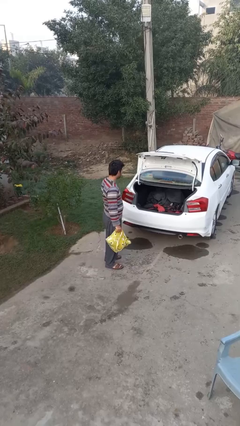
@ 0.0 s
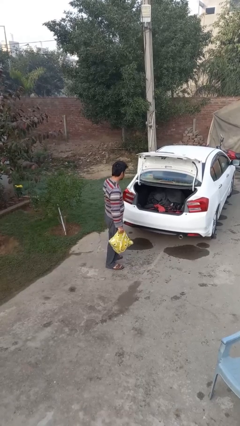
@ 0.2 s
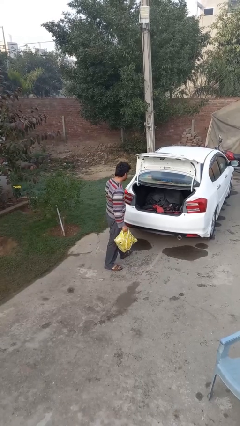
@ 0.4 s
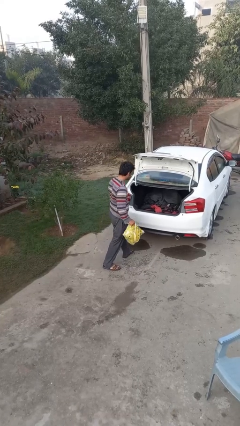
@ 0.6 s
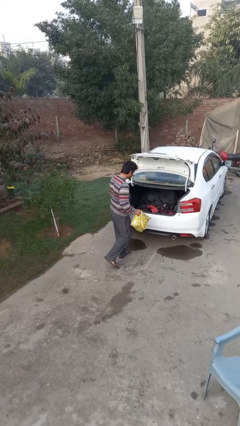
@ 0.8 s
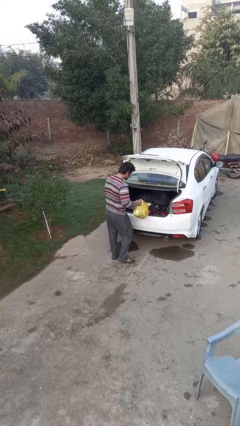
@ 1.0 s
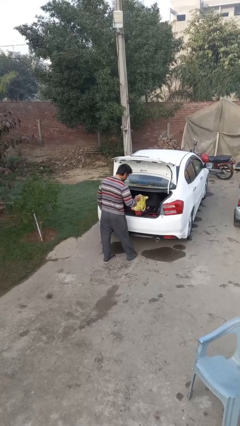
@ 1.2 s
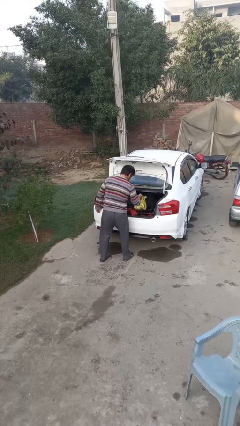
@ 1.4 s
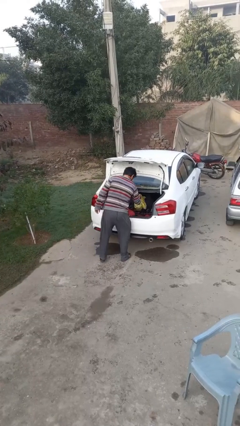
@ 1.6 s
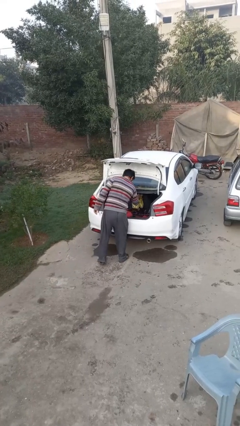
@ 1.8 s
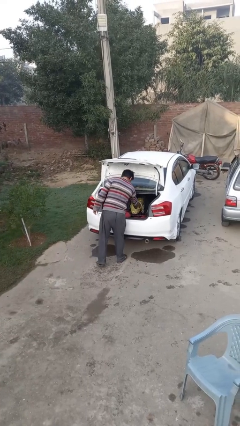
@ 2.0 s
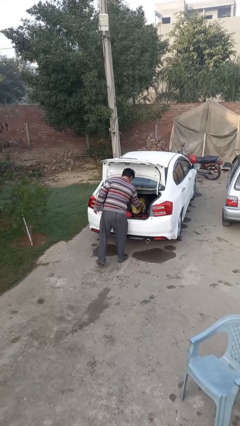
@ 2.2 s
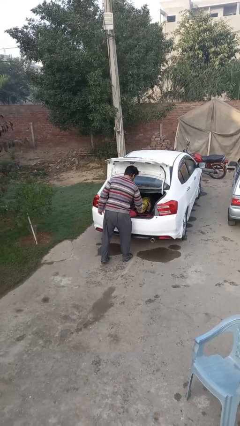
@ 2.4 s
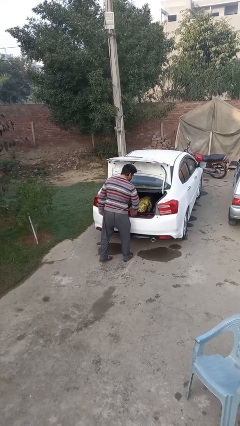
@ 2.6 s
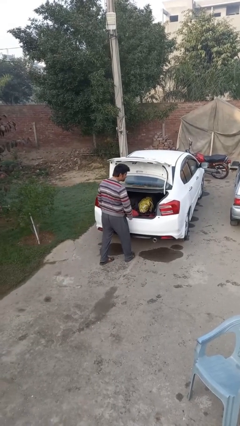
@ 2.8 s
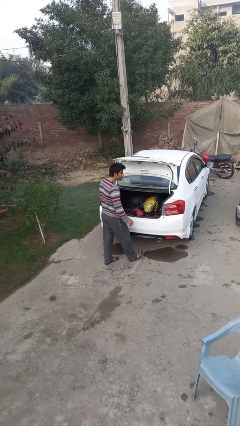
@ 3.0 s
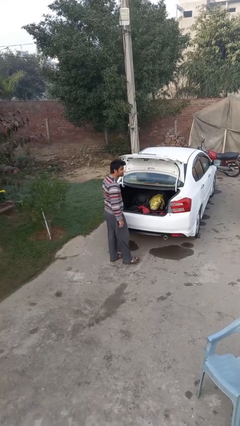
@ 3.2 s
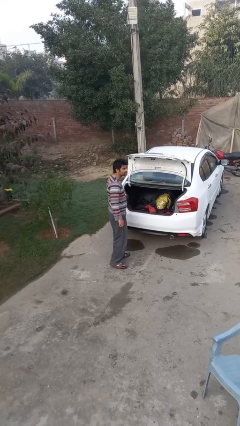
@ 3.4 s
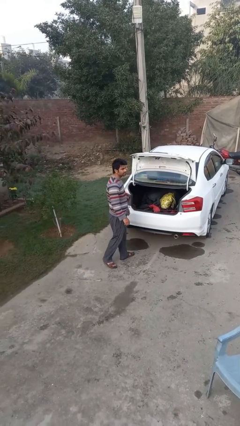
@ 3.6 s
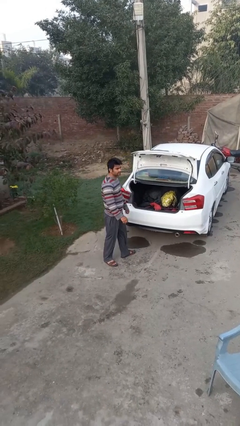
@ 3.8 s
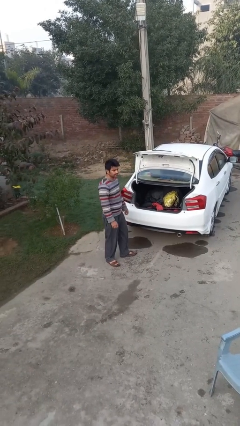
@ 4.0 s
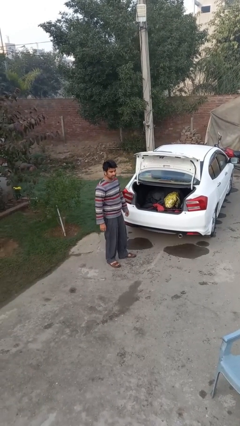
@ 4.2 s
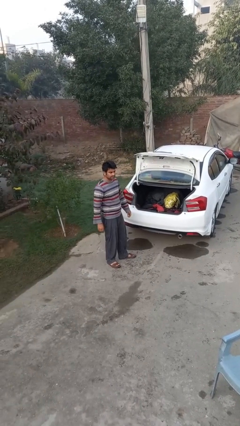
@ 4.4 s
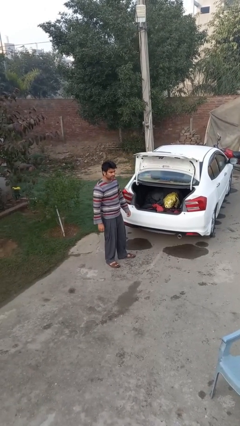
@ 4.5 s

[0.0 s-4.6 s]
person loads car

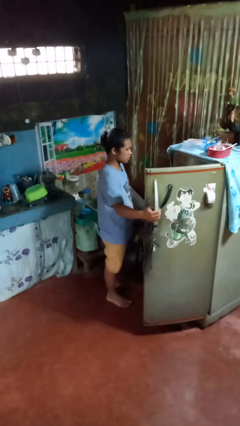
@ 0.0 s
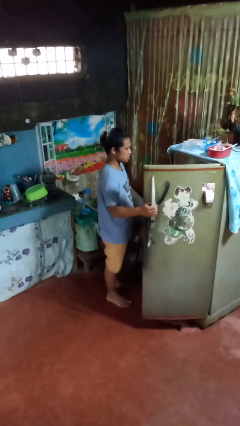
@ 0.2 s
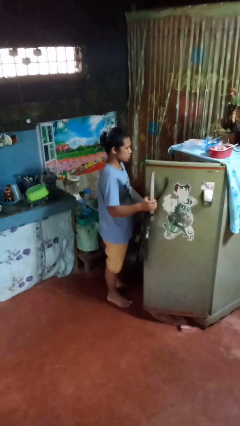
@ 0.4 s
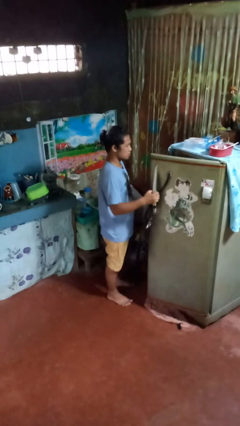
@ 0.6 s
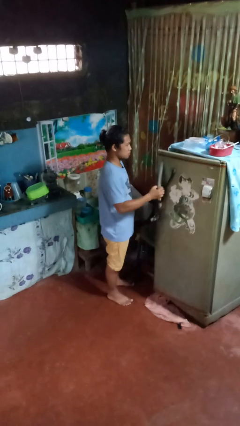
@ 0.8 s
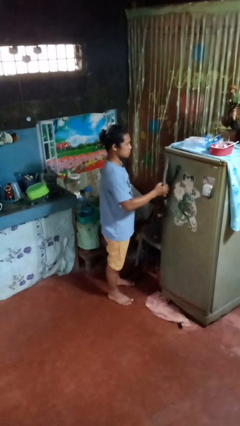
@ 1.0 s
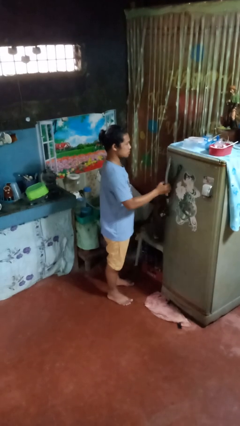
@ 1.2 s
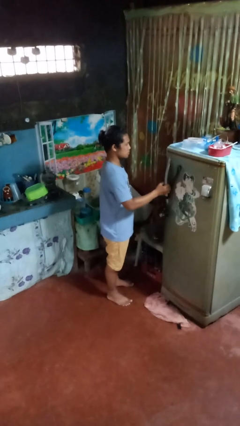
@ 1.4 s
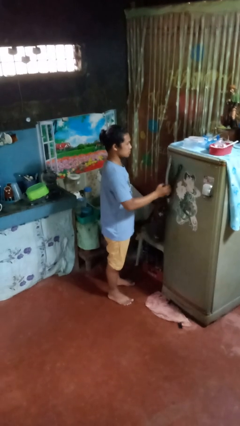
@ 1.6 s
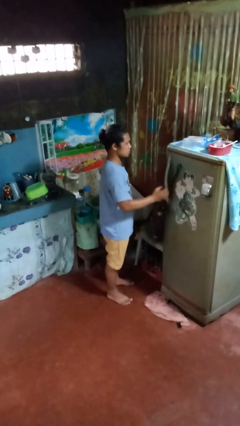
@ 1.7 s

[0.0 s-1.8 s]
person closes refrigerator

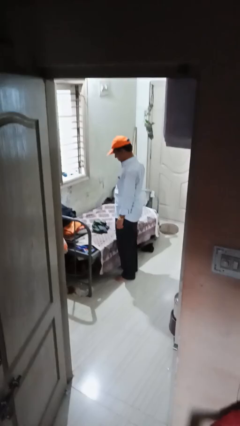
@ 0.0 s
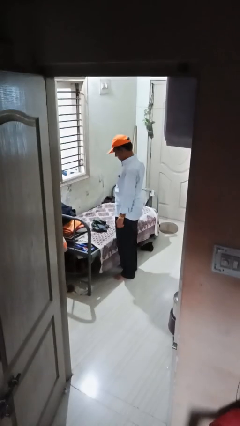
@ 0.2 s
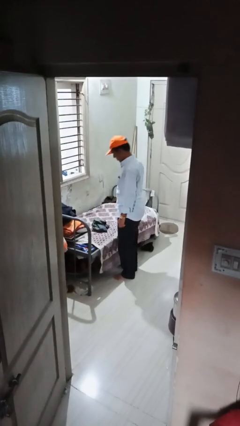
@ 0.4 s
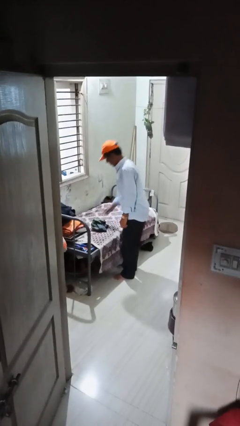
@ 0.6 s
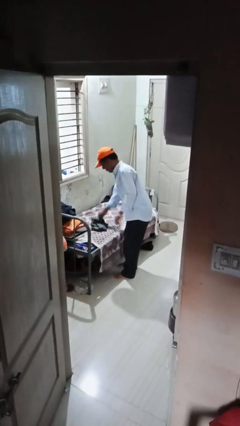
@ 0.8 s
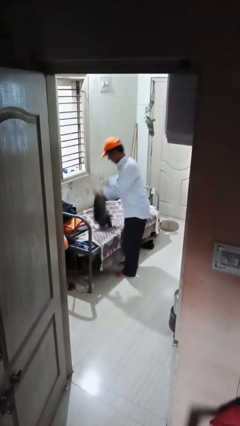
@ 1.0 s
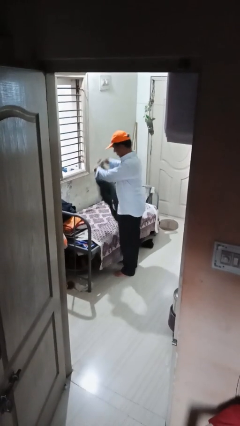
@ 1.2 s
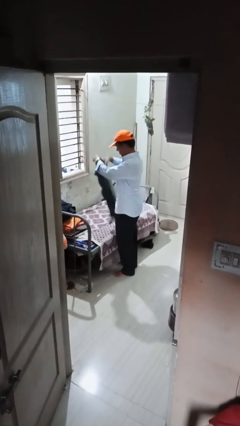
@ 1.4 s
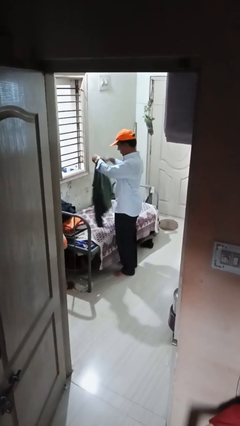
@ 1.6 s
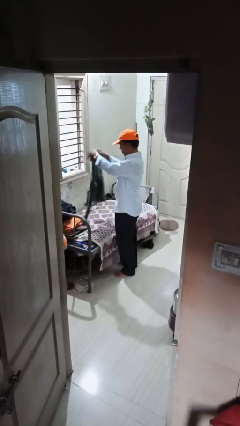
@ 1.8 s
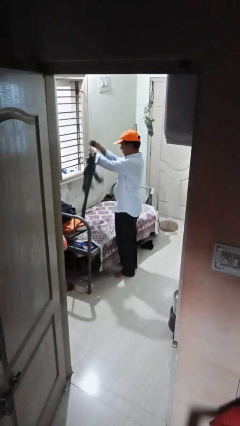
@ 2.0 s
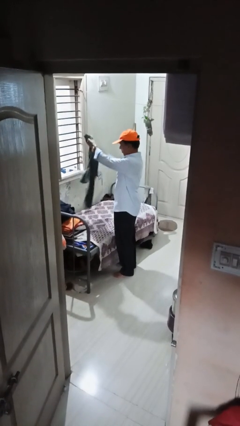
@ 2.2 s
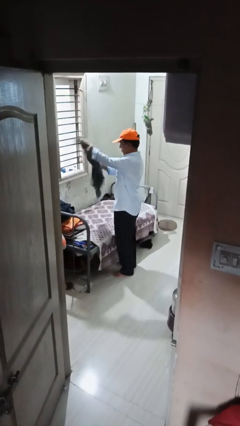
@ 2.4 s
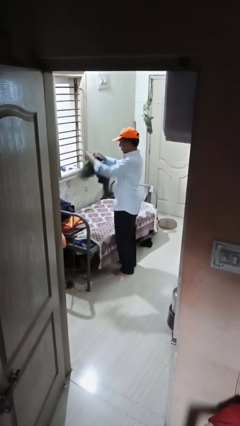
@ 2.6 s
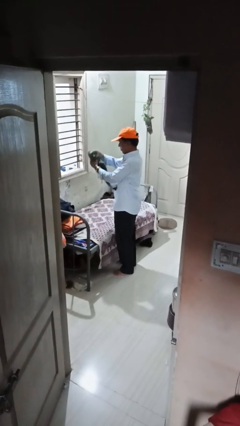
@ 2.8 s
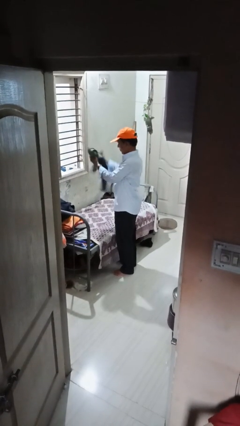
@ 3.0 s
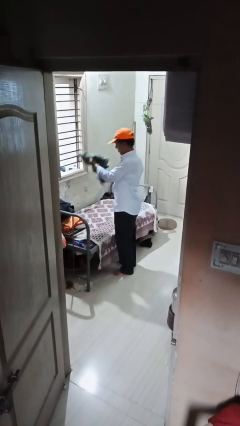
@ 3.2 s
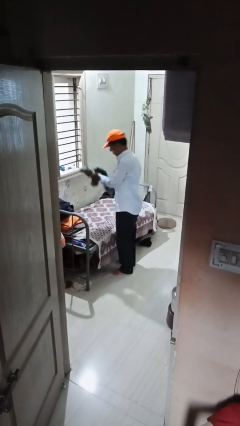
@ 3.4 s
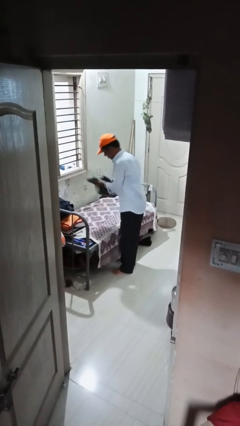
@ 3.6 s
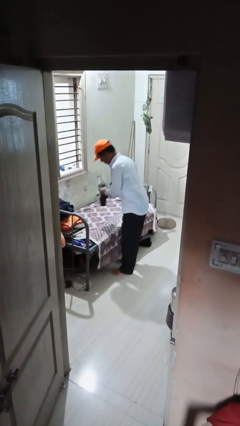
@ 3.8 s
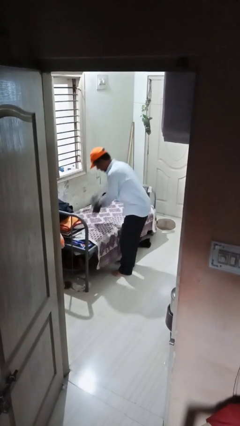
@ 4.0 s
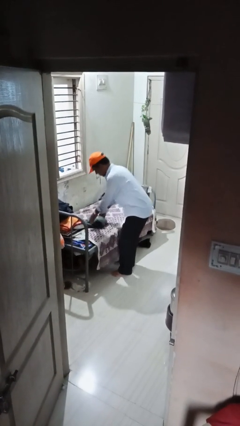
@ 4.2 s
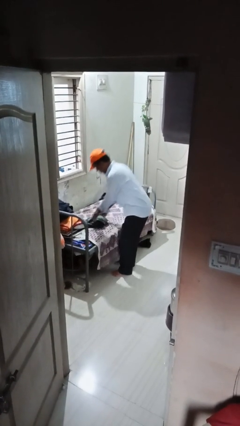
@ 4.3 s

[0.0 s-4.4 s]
person folds shirt

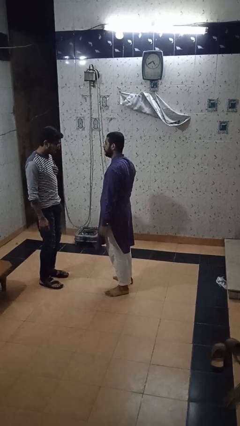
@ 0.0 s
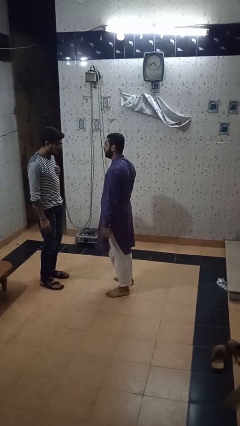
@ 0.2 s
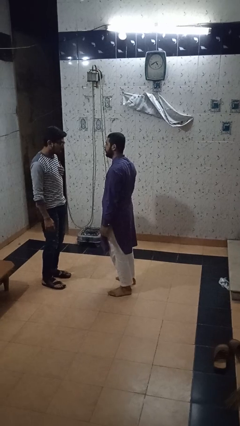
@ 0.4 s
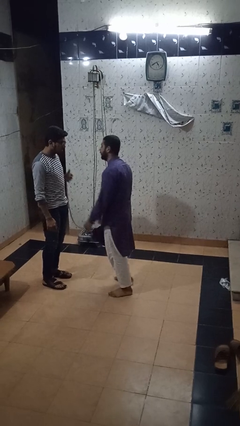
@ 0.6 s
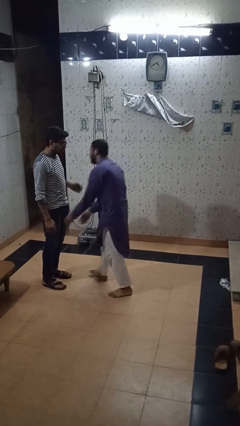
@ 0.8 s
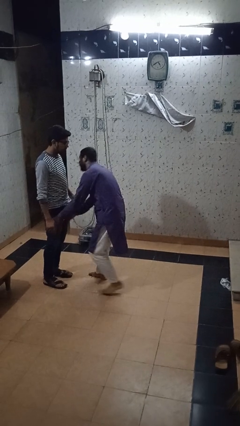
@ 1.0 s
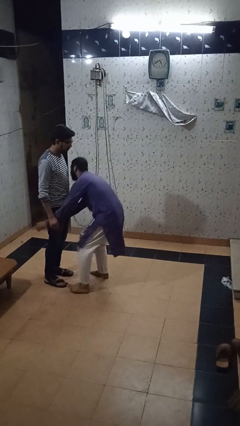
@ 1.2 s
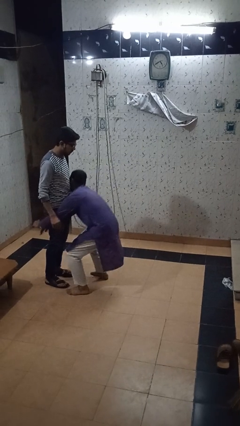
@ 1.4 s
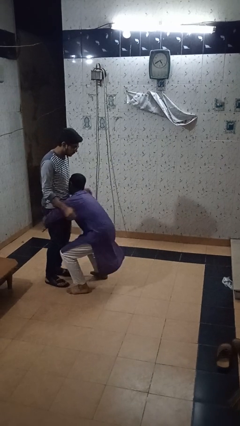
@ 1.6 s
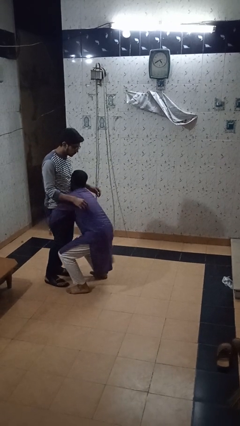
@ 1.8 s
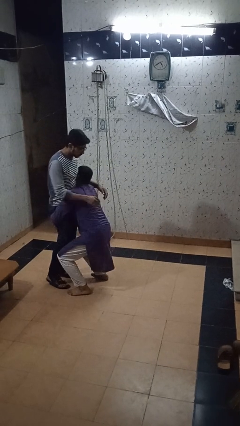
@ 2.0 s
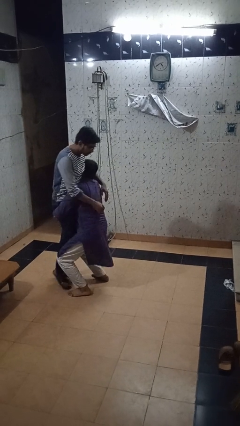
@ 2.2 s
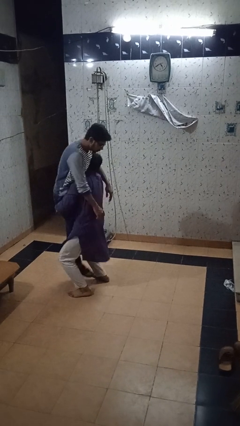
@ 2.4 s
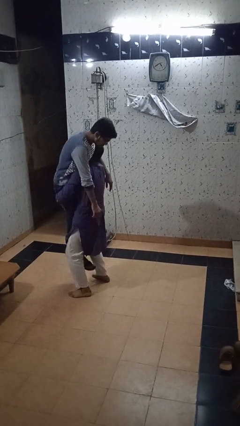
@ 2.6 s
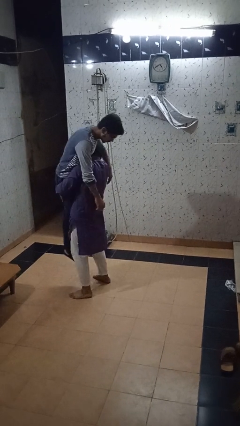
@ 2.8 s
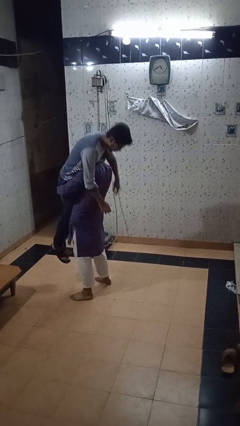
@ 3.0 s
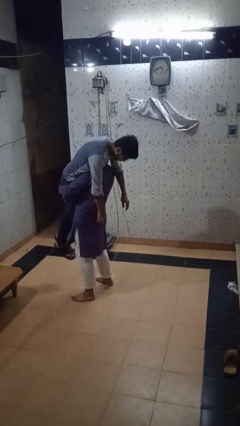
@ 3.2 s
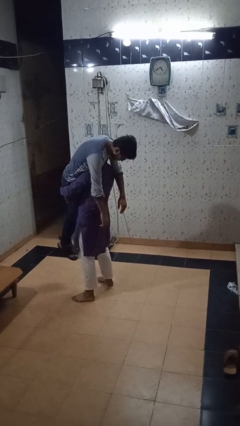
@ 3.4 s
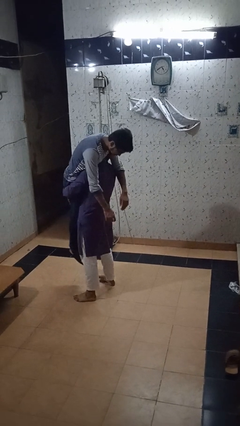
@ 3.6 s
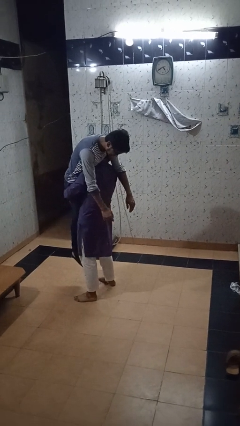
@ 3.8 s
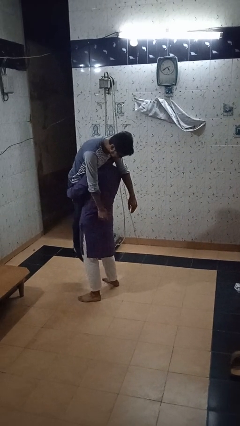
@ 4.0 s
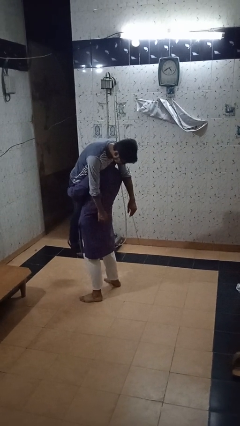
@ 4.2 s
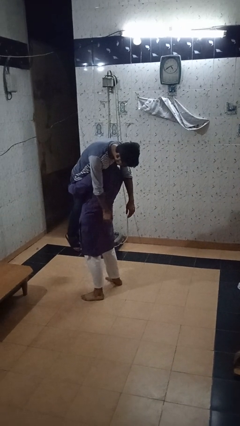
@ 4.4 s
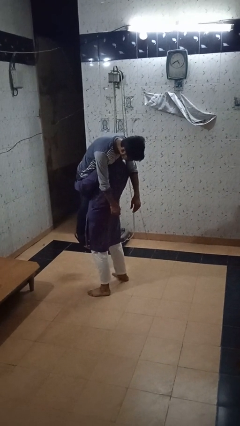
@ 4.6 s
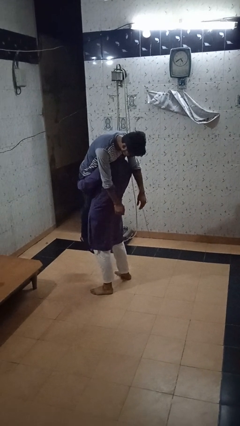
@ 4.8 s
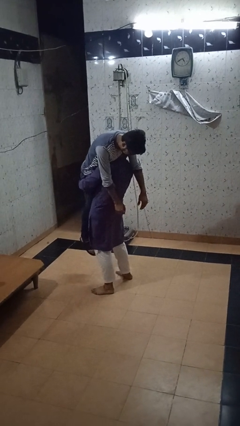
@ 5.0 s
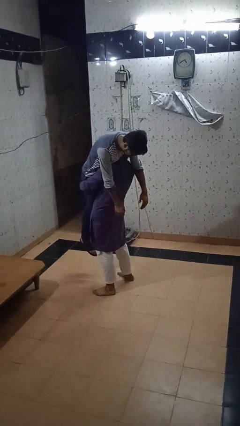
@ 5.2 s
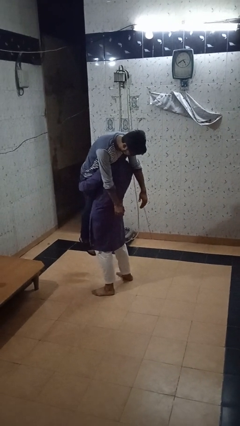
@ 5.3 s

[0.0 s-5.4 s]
person carries person over shoulder

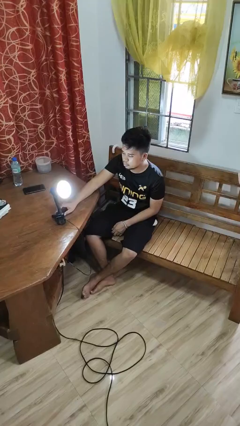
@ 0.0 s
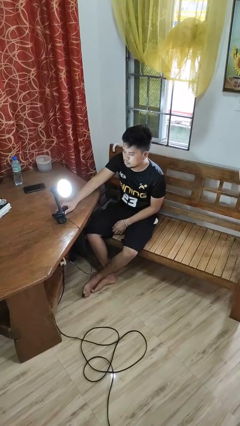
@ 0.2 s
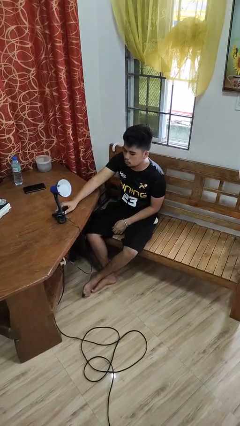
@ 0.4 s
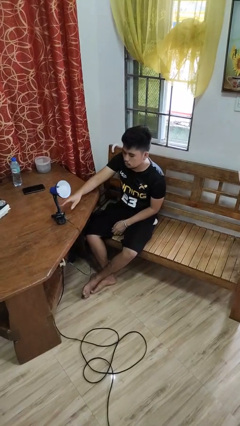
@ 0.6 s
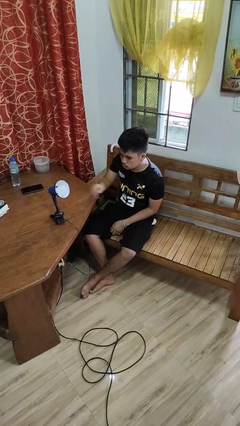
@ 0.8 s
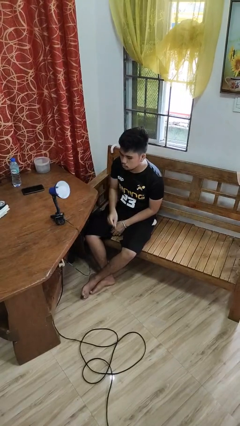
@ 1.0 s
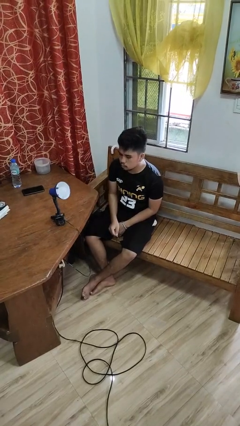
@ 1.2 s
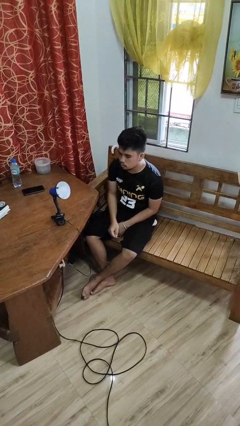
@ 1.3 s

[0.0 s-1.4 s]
person turns off lamp
